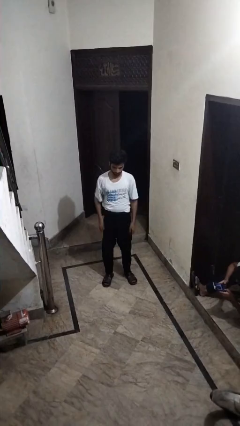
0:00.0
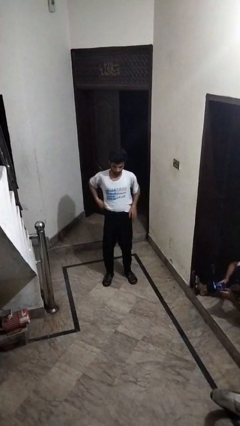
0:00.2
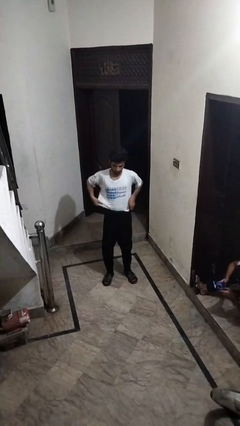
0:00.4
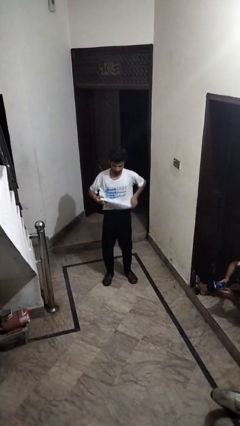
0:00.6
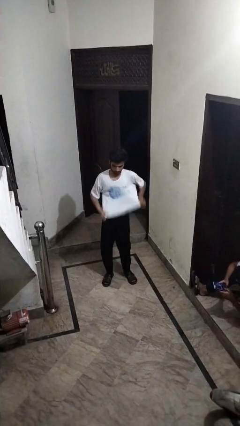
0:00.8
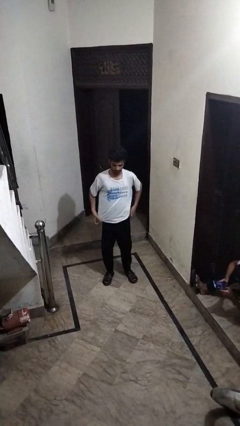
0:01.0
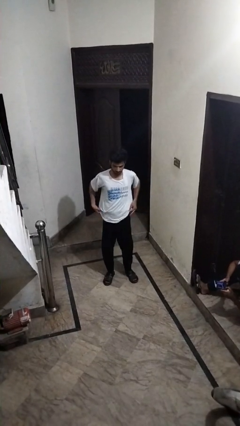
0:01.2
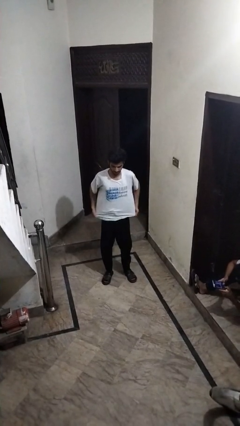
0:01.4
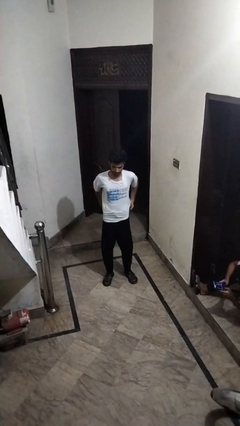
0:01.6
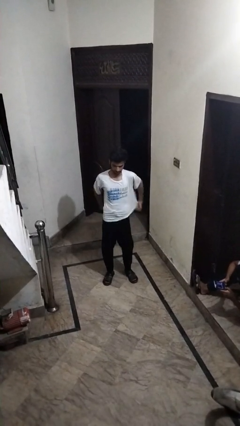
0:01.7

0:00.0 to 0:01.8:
person untucks shirt

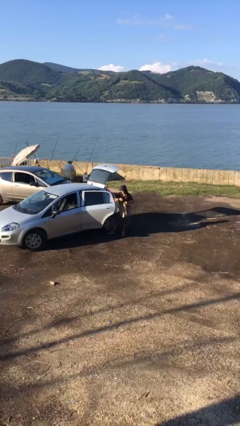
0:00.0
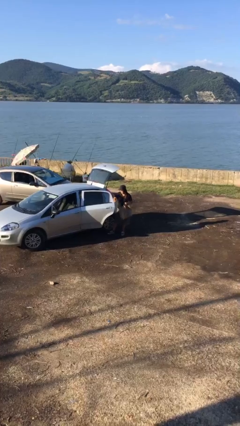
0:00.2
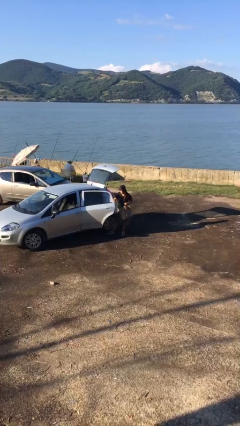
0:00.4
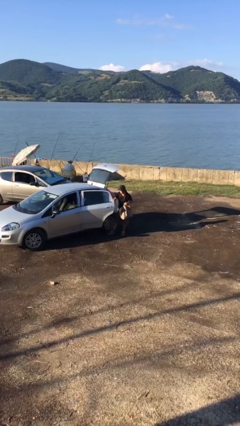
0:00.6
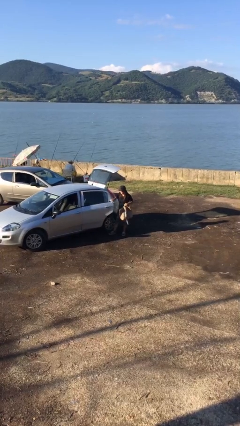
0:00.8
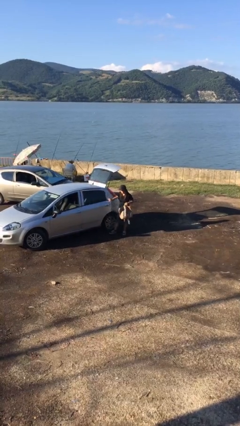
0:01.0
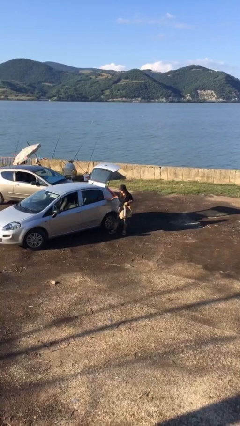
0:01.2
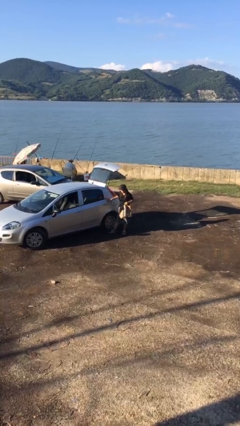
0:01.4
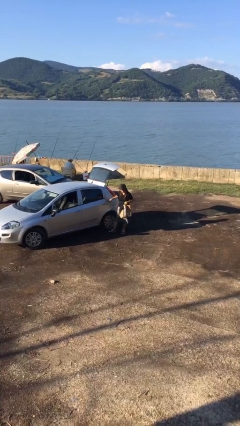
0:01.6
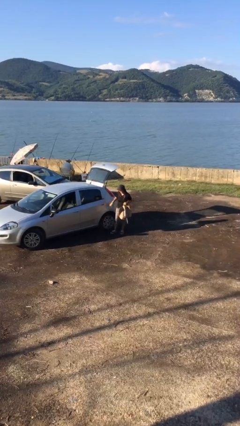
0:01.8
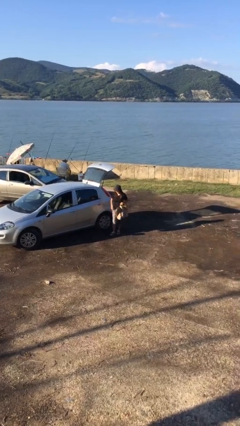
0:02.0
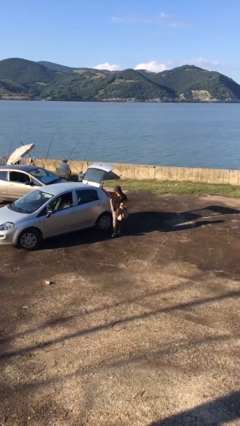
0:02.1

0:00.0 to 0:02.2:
person closes car door

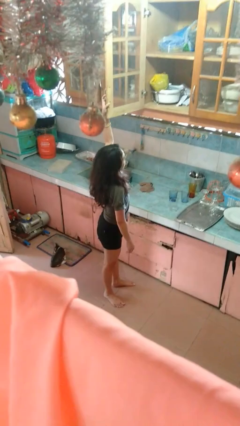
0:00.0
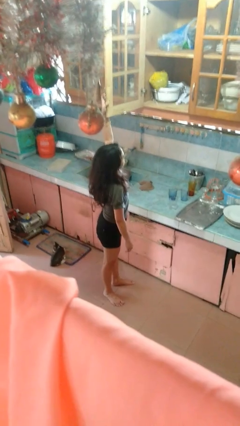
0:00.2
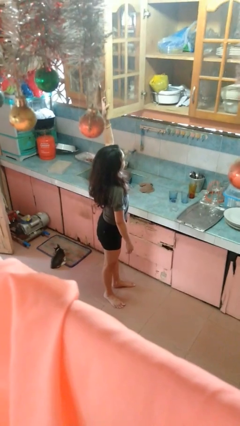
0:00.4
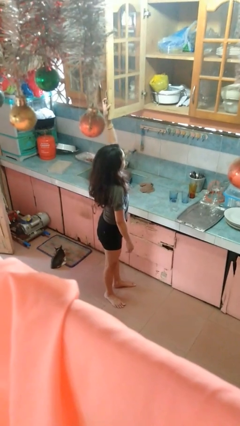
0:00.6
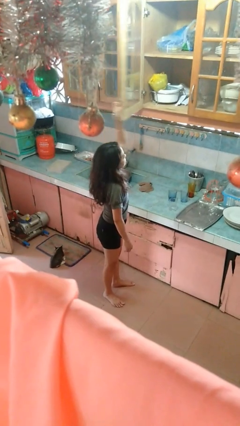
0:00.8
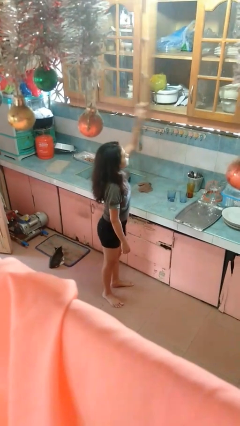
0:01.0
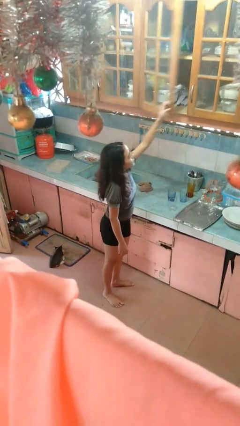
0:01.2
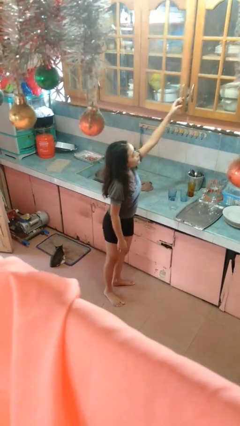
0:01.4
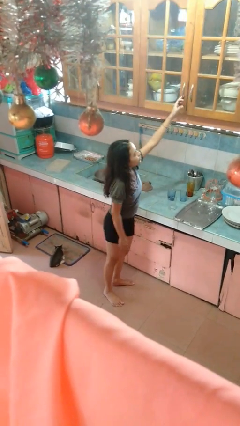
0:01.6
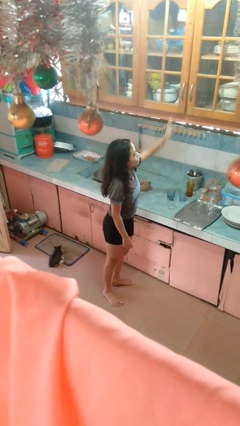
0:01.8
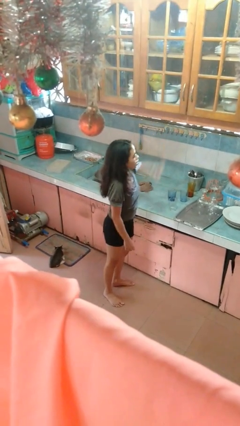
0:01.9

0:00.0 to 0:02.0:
person closes cabinet

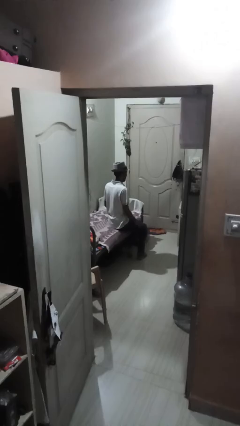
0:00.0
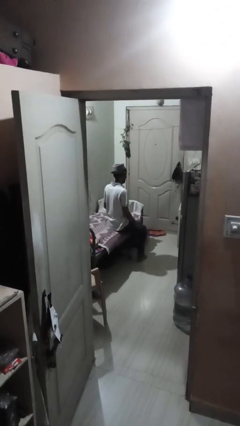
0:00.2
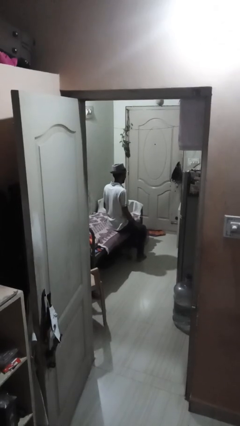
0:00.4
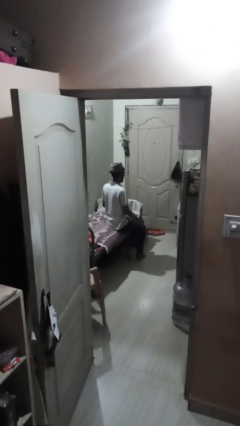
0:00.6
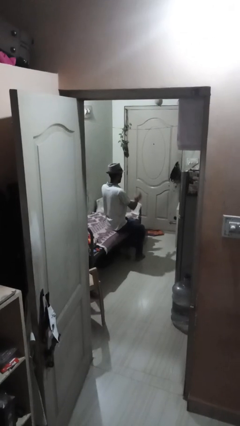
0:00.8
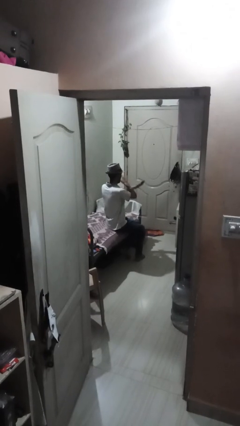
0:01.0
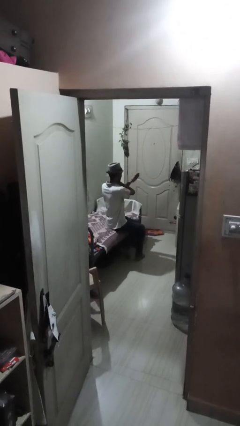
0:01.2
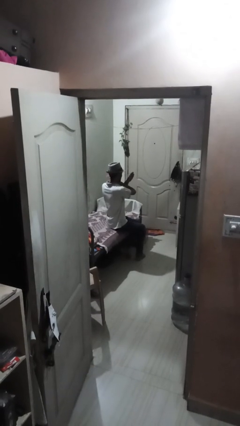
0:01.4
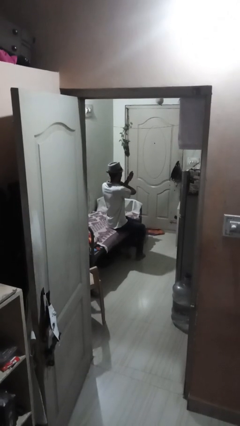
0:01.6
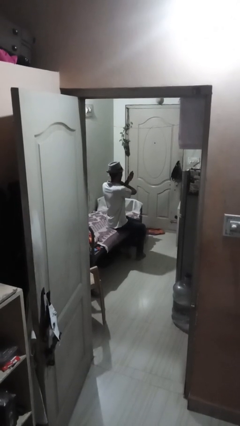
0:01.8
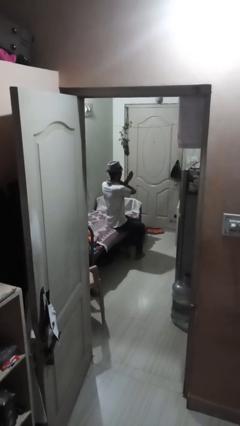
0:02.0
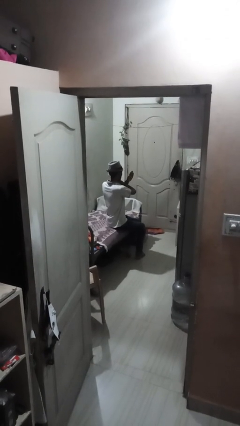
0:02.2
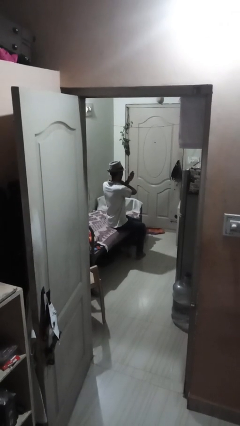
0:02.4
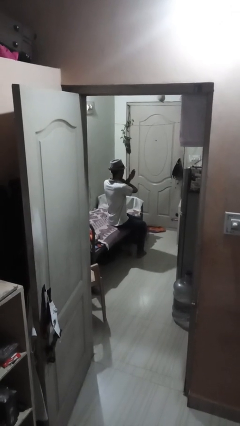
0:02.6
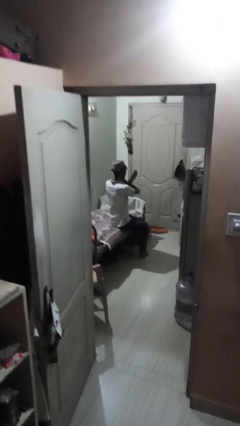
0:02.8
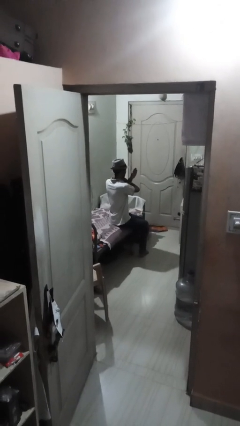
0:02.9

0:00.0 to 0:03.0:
person gestures arms x

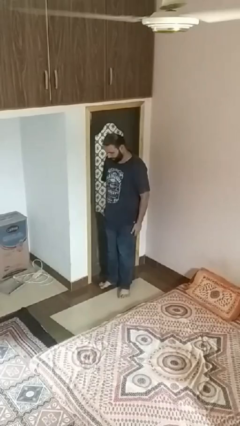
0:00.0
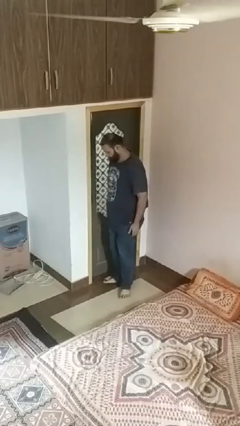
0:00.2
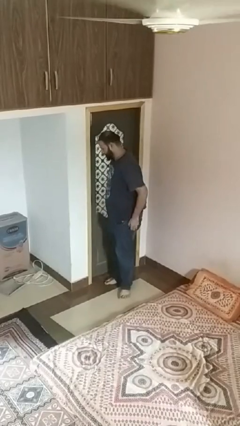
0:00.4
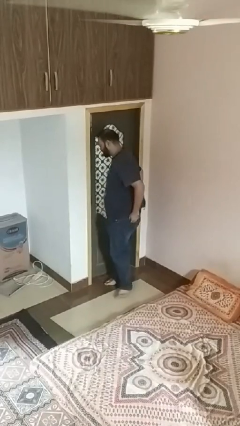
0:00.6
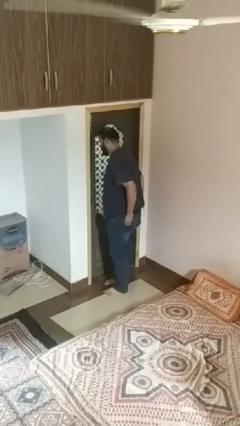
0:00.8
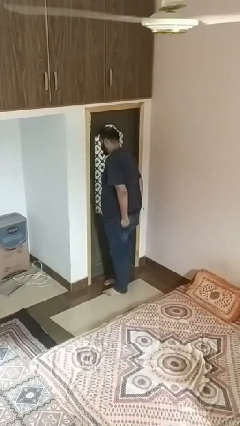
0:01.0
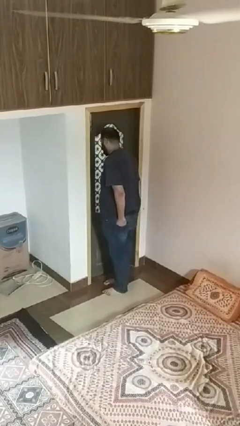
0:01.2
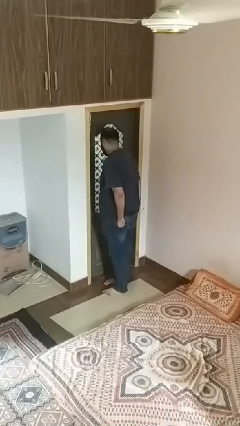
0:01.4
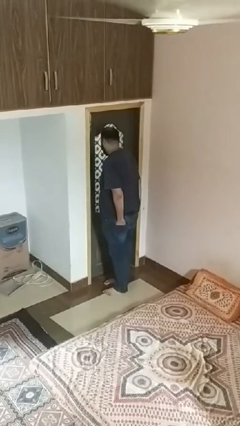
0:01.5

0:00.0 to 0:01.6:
person puts hands in back pockets

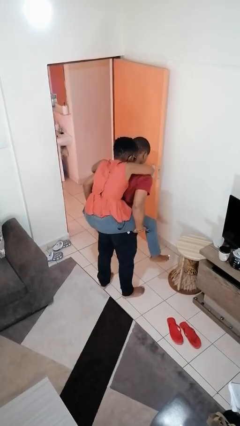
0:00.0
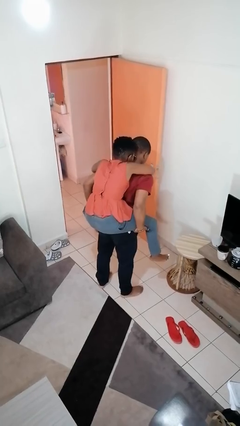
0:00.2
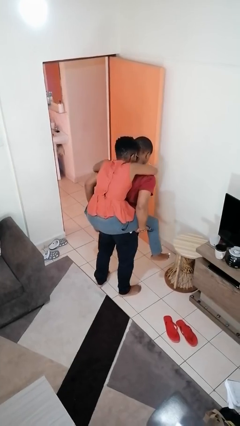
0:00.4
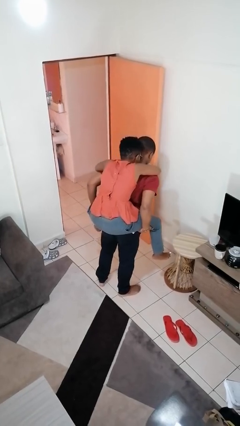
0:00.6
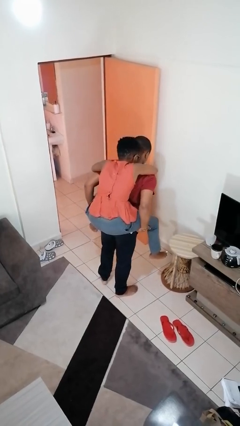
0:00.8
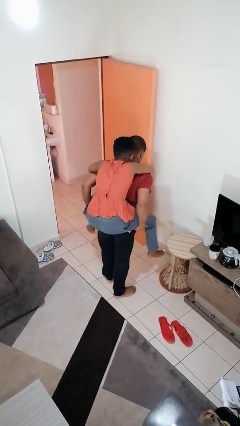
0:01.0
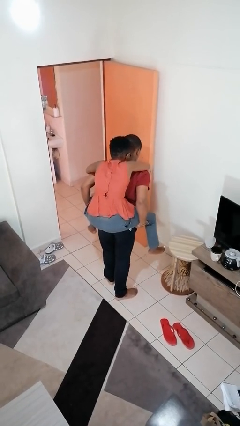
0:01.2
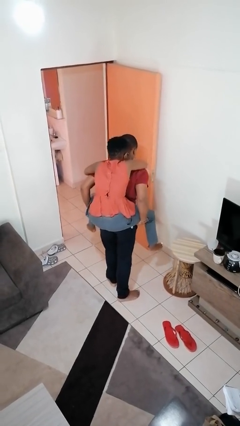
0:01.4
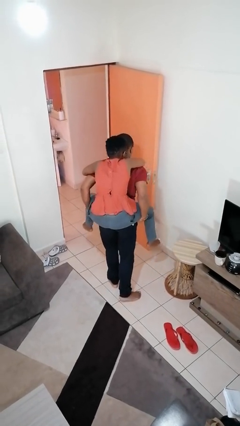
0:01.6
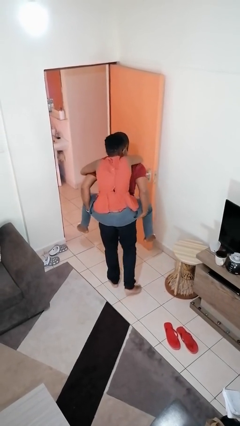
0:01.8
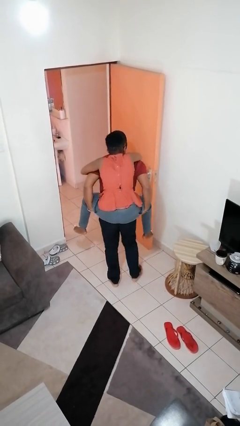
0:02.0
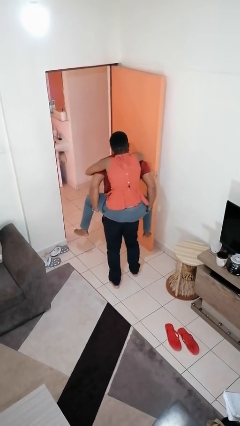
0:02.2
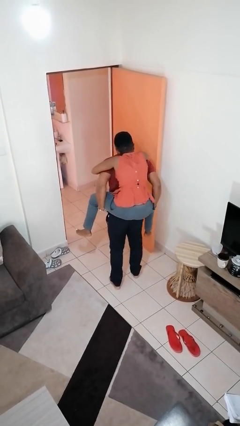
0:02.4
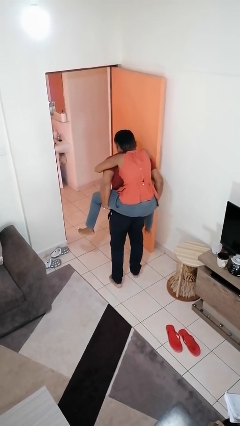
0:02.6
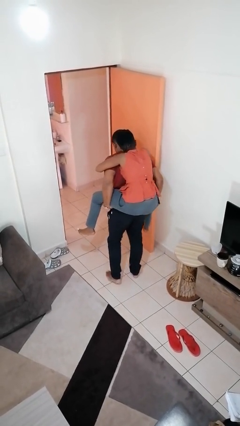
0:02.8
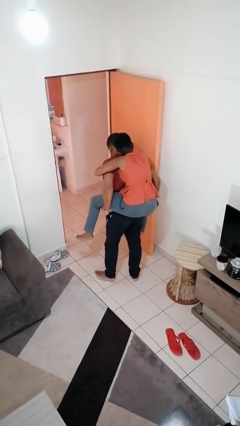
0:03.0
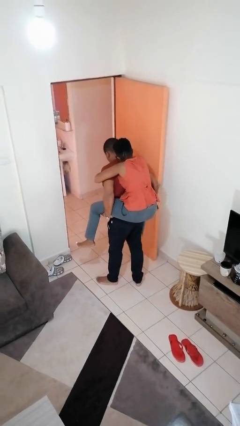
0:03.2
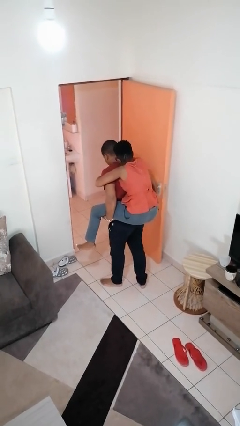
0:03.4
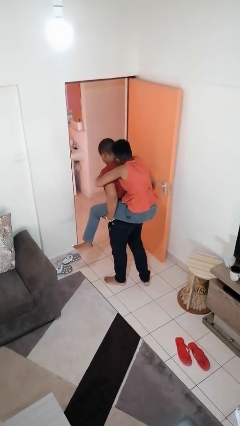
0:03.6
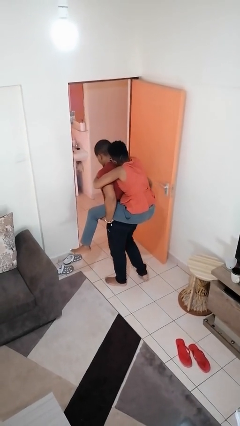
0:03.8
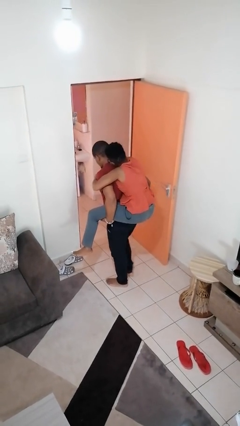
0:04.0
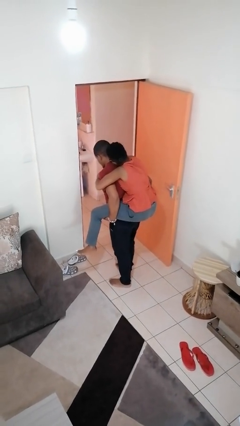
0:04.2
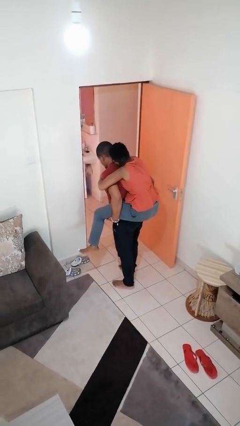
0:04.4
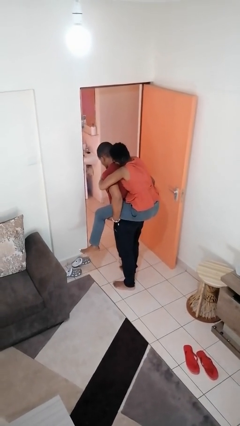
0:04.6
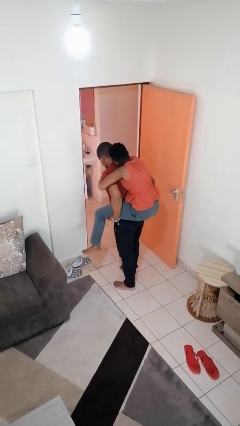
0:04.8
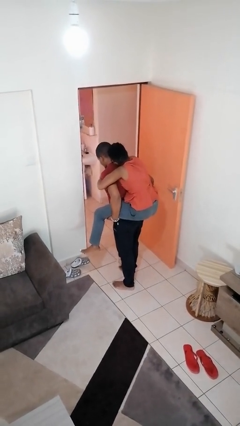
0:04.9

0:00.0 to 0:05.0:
person carries person on back

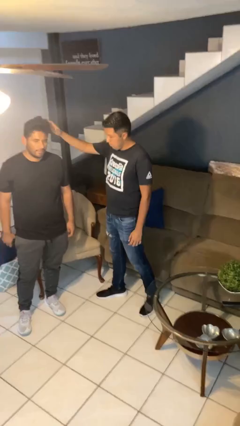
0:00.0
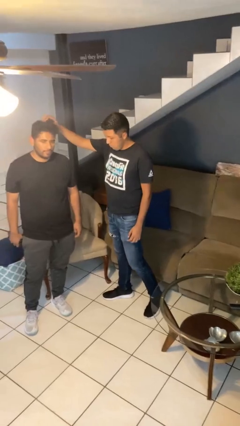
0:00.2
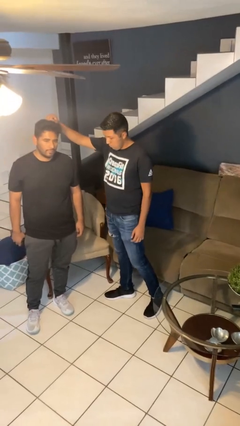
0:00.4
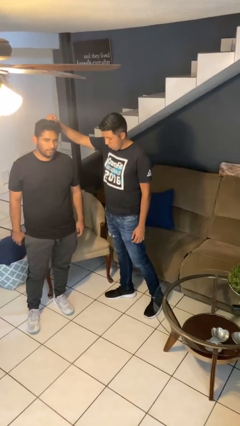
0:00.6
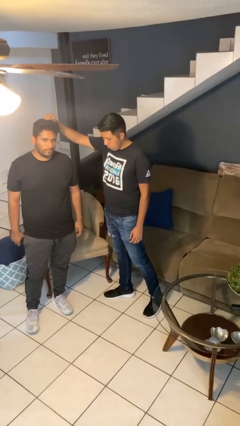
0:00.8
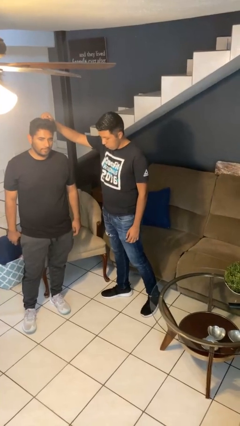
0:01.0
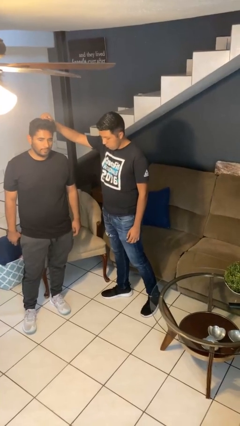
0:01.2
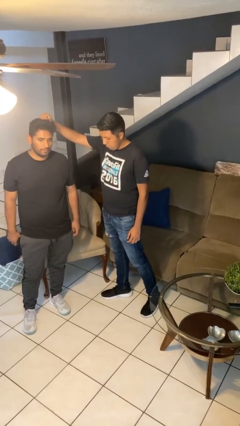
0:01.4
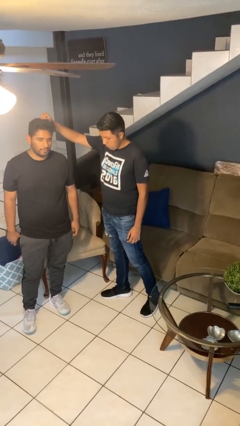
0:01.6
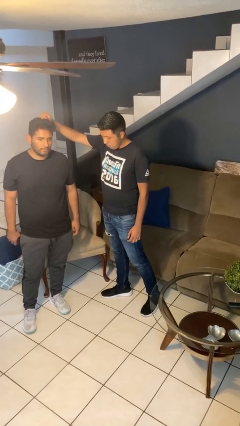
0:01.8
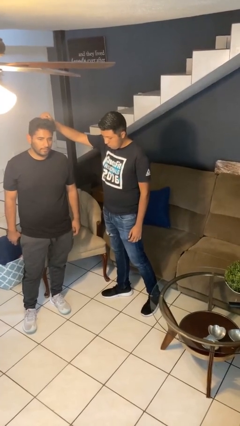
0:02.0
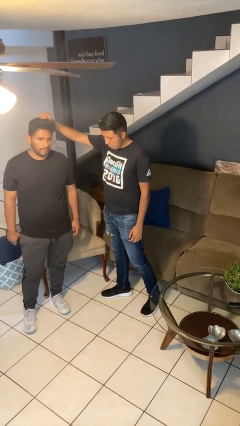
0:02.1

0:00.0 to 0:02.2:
person grabs person by hair
